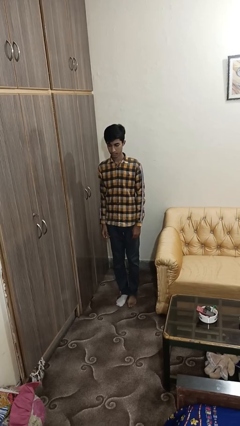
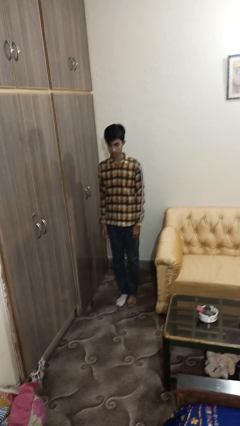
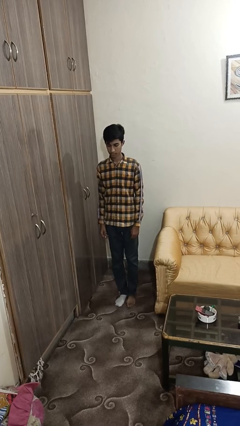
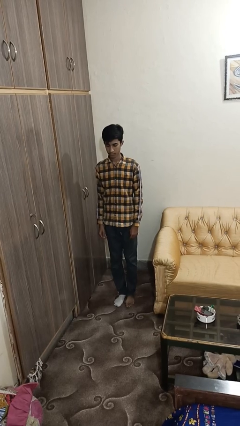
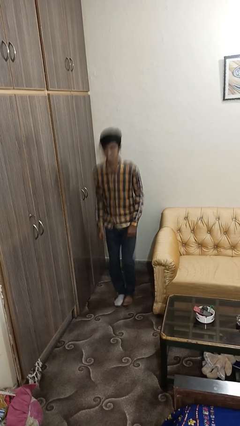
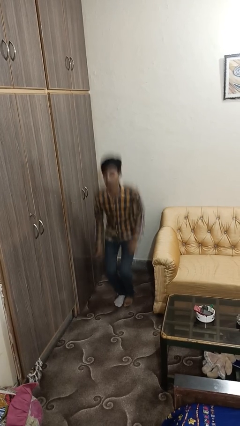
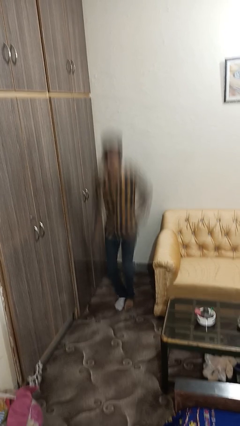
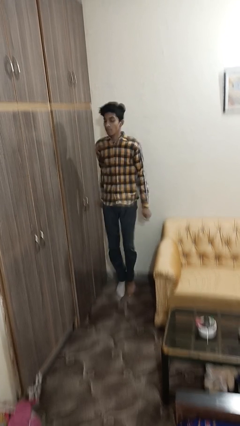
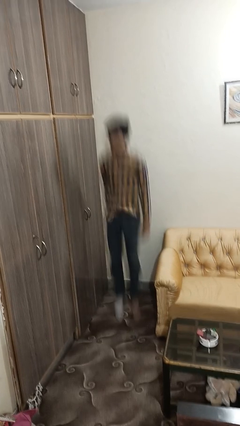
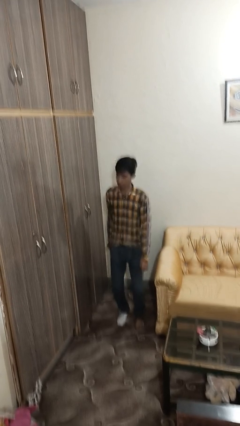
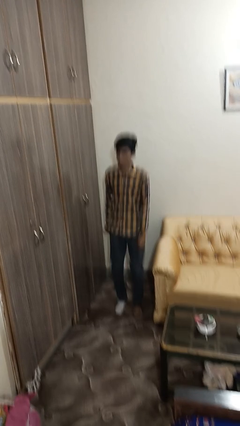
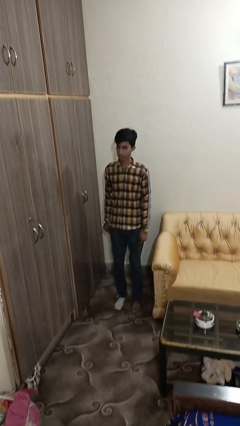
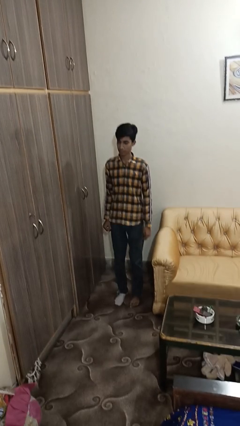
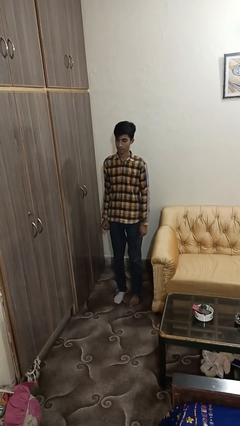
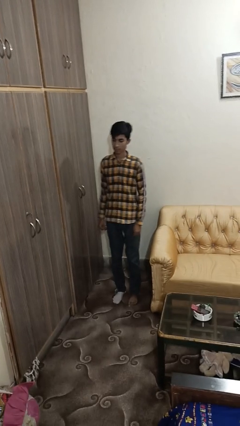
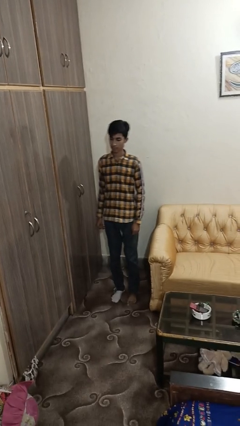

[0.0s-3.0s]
person jumps

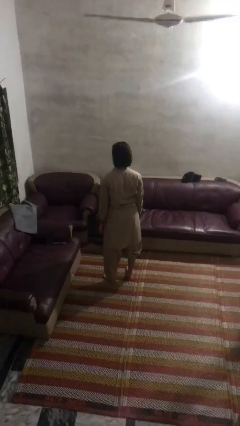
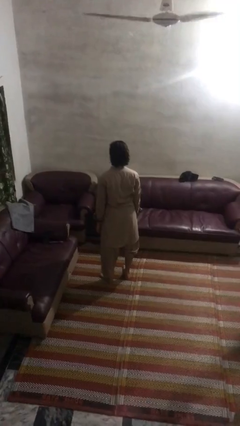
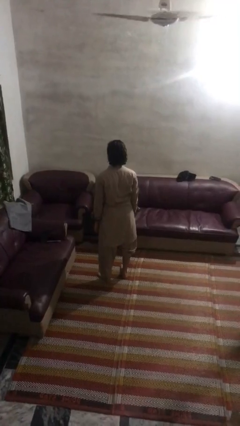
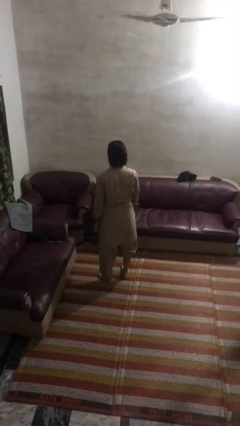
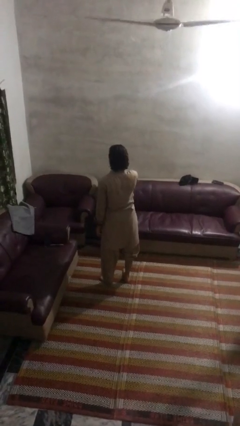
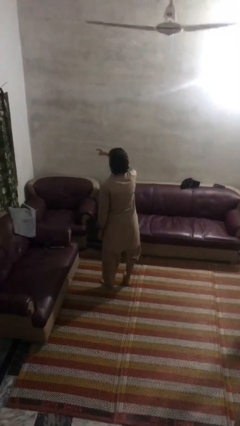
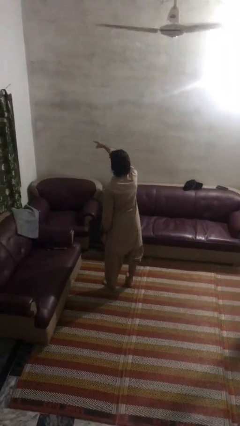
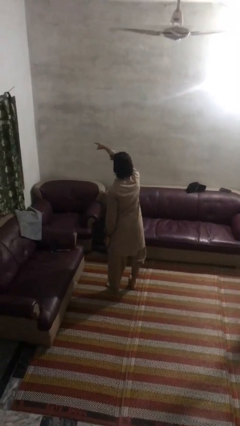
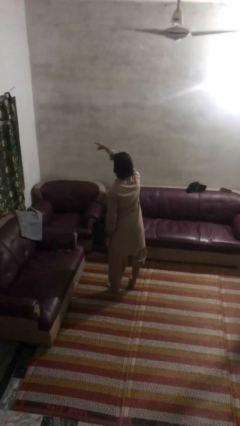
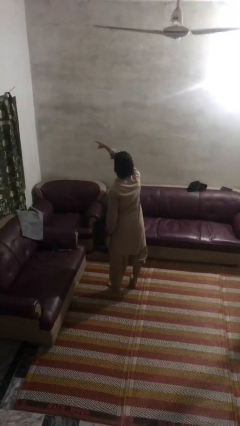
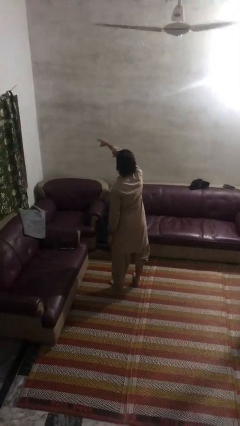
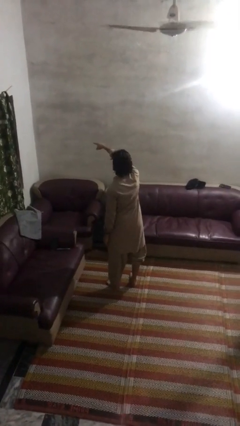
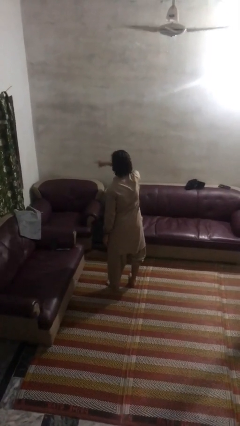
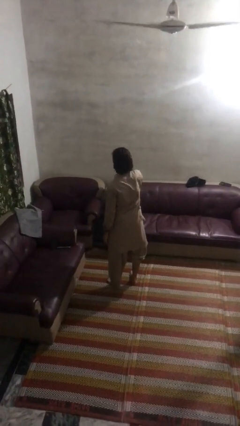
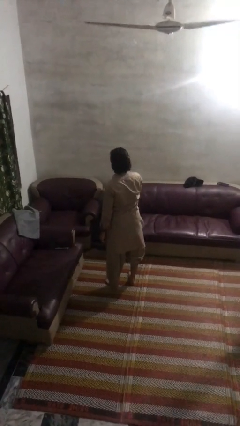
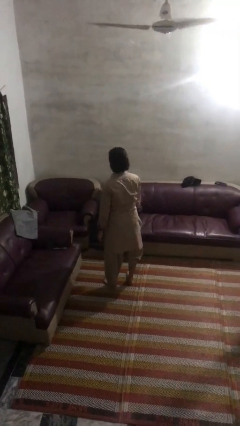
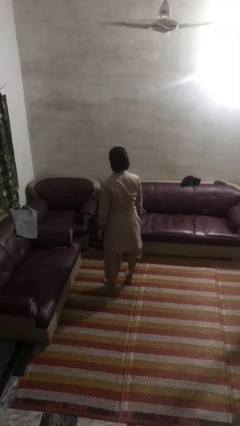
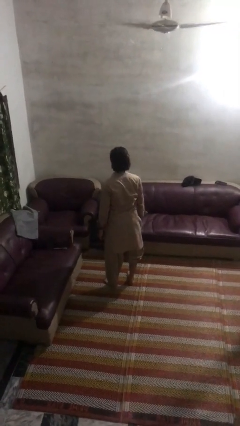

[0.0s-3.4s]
person points at person

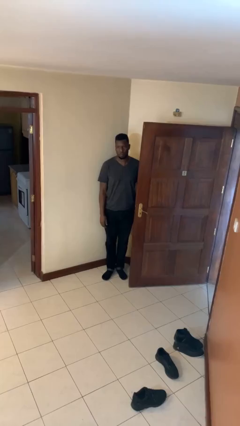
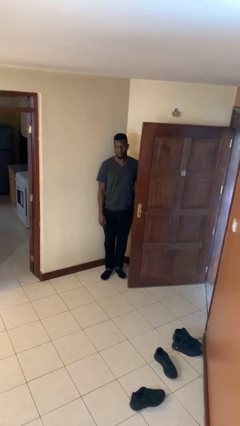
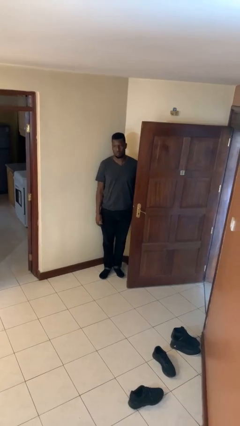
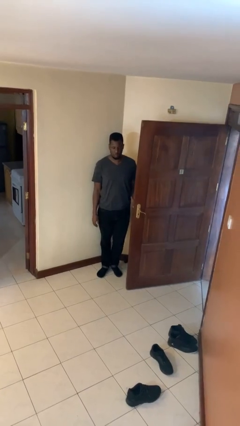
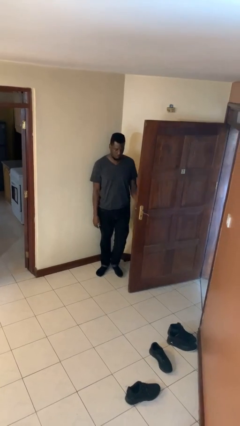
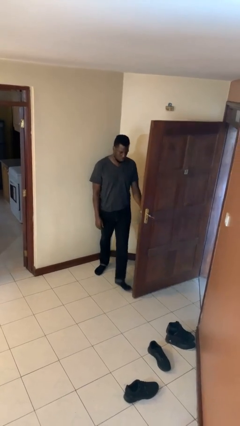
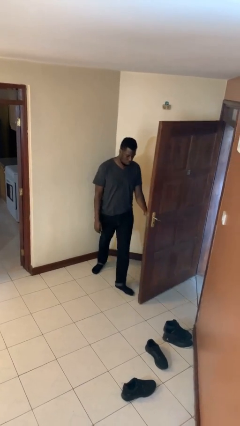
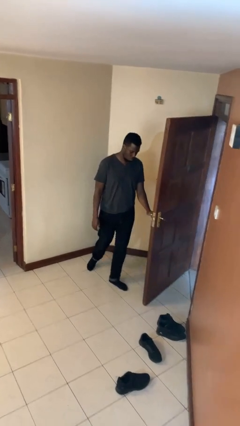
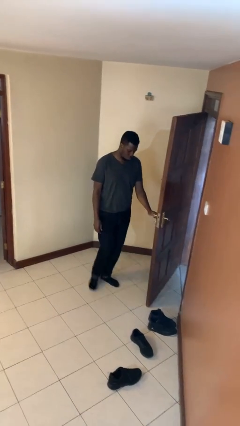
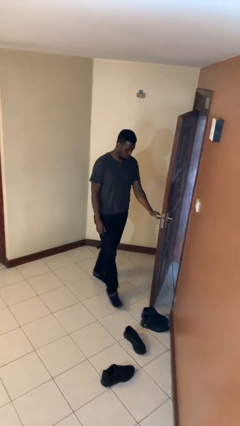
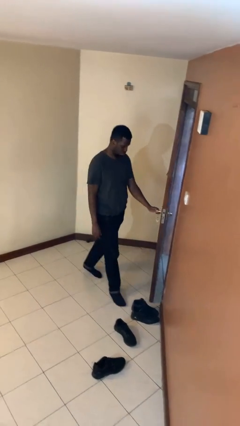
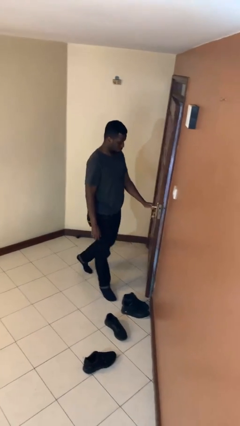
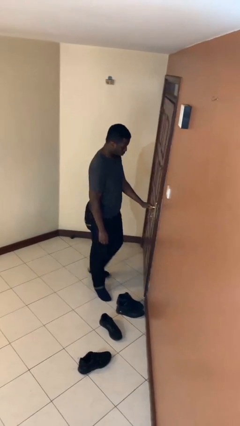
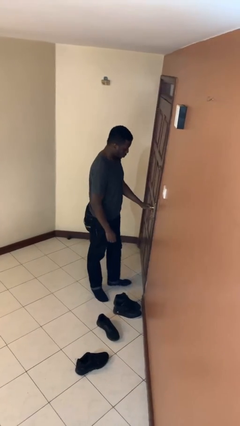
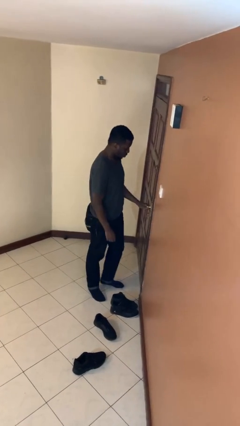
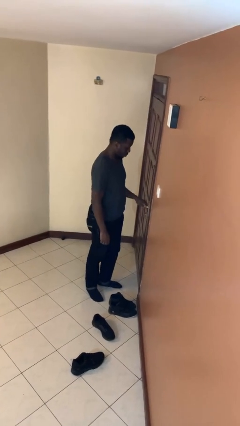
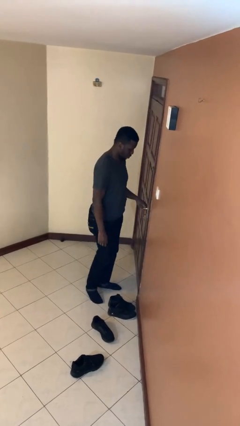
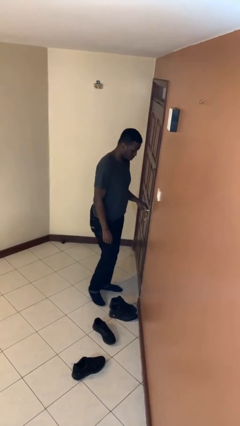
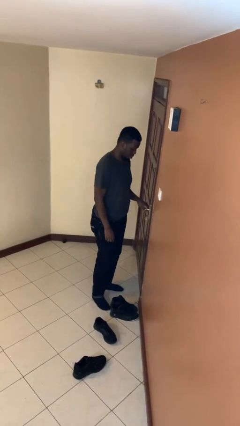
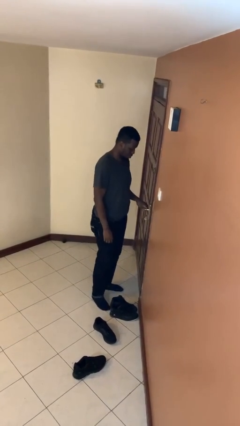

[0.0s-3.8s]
person closes facility door

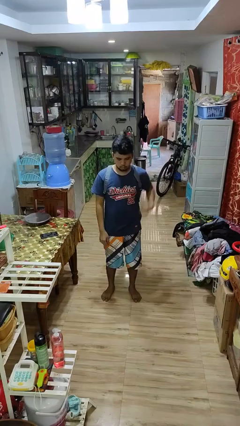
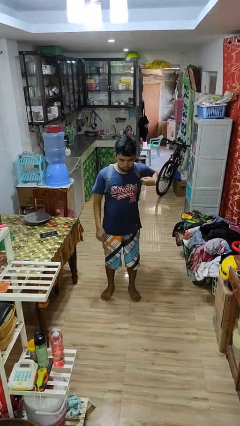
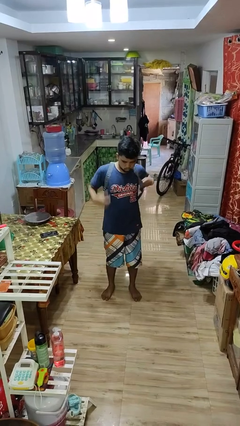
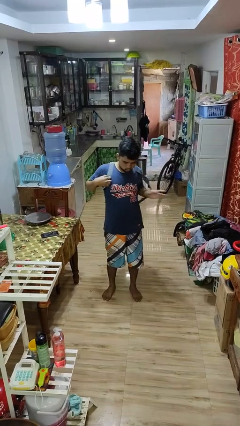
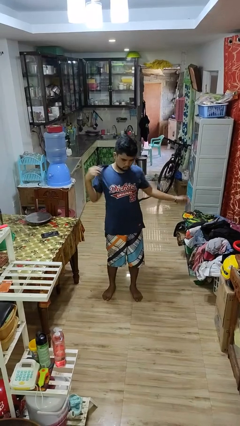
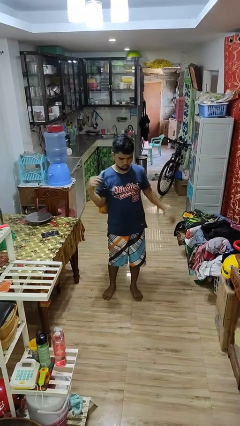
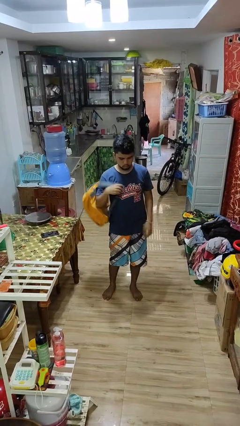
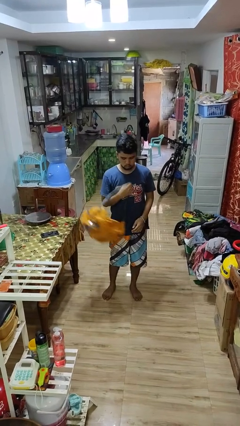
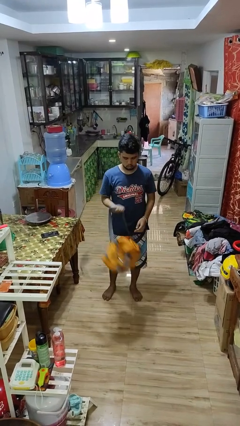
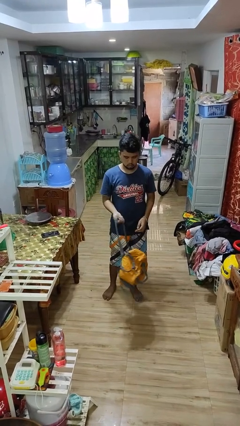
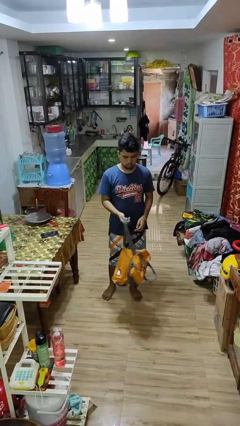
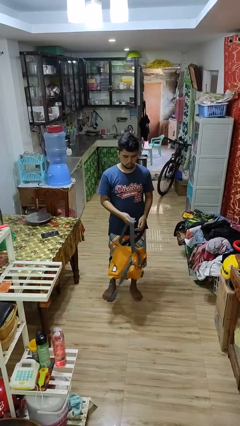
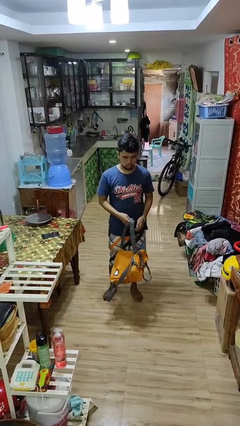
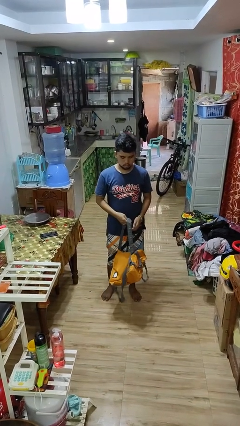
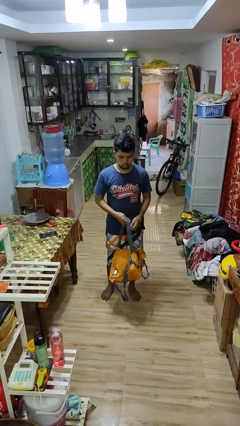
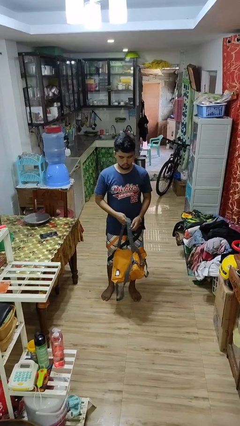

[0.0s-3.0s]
person takes off backpack

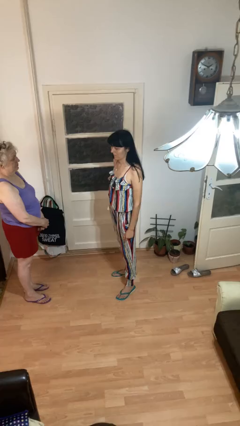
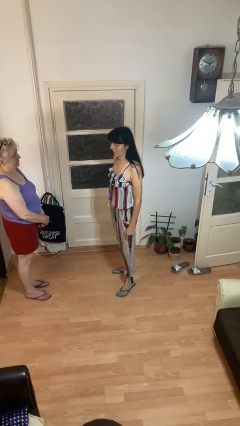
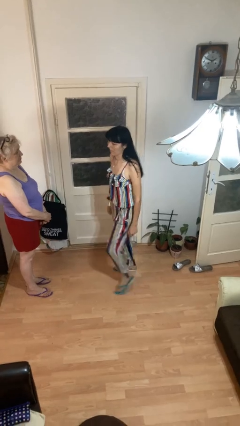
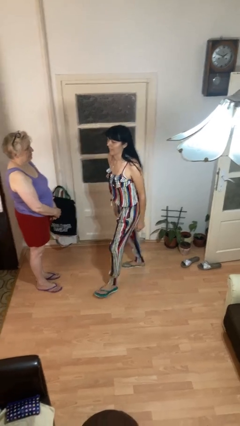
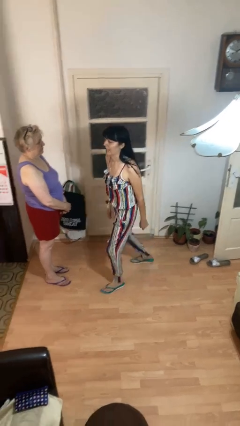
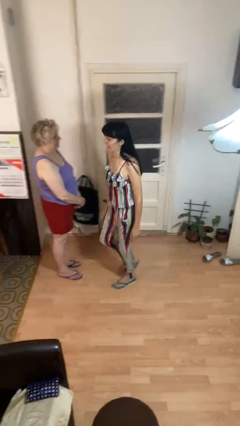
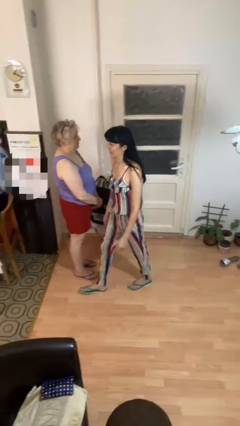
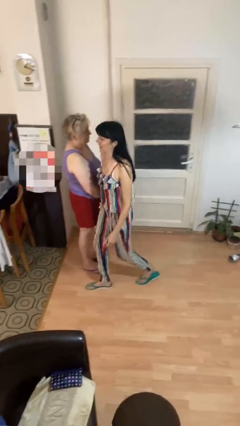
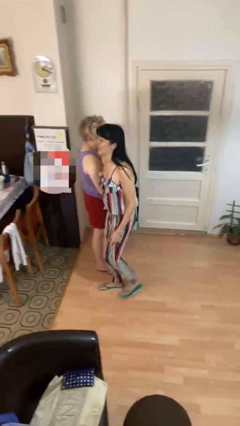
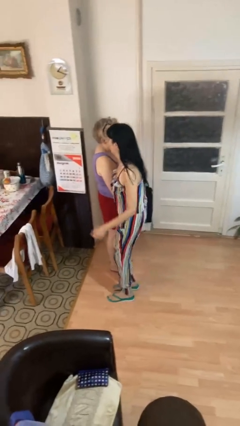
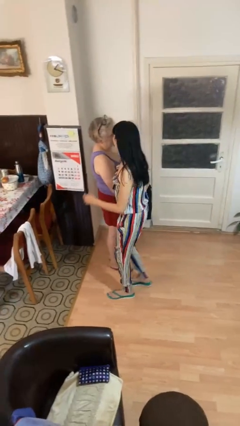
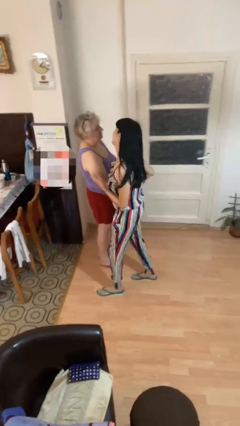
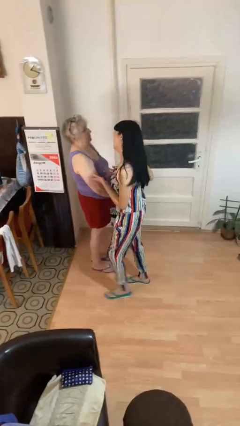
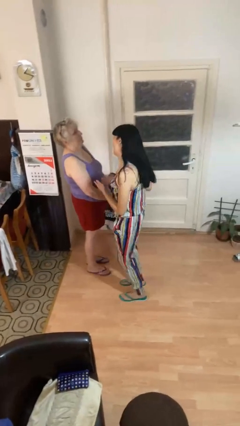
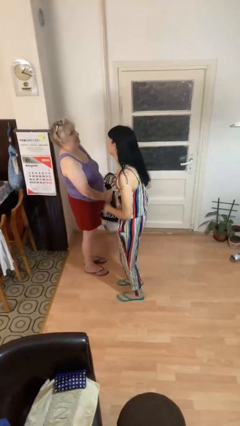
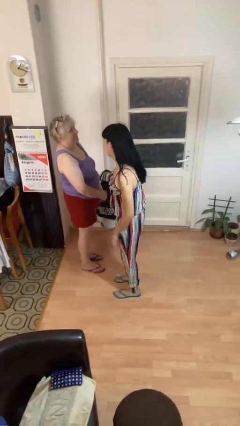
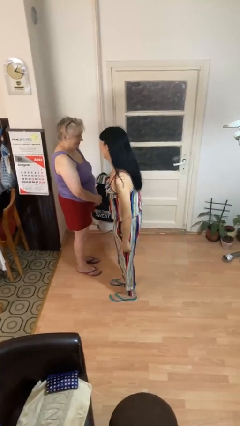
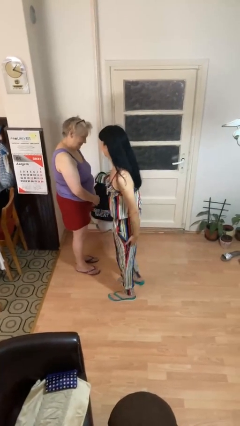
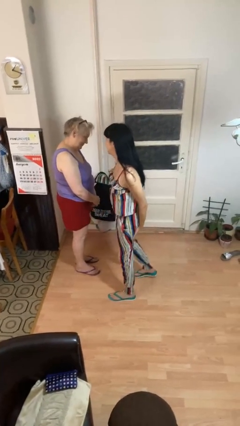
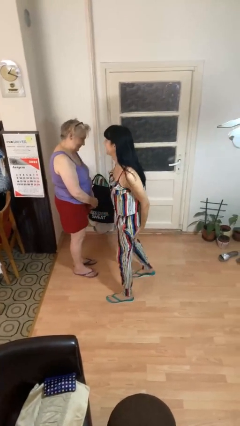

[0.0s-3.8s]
person bumps into person

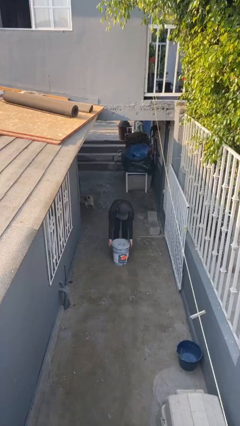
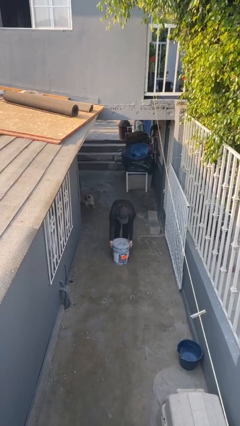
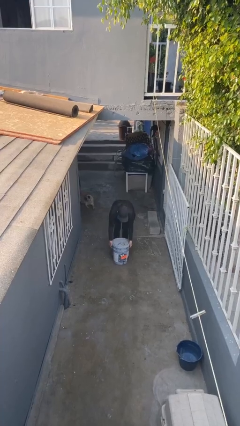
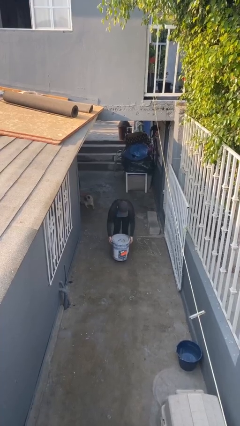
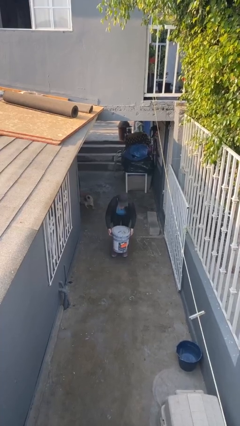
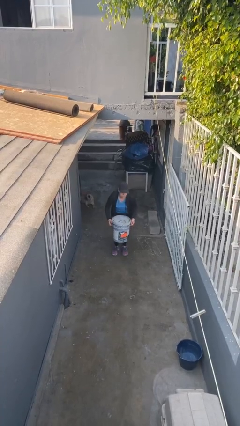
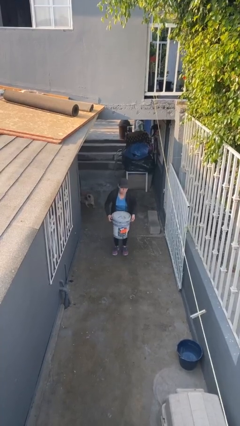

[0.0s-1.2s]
person picks up object from floor
